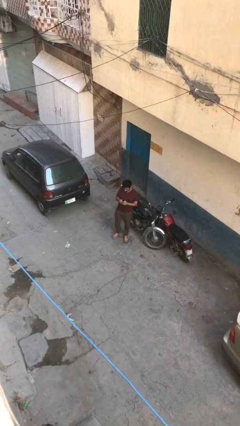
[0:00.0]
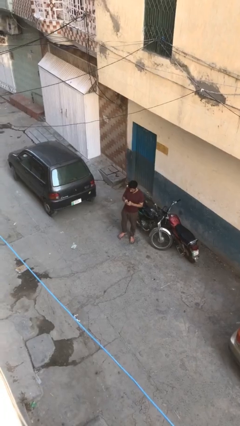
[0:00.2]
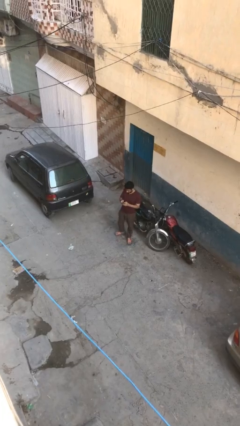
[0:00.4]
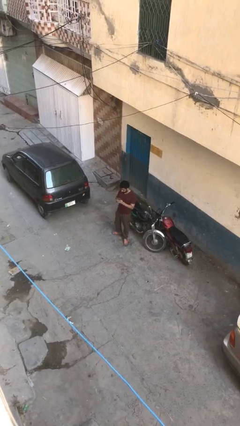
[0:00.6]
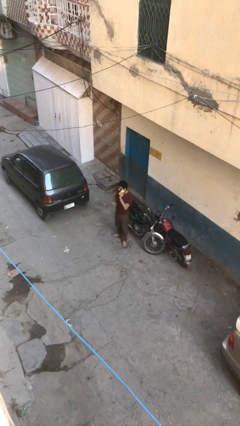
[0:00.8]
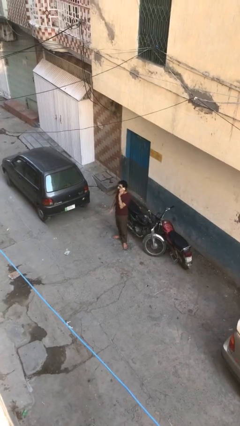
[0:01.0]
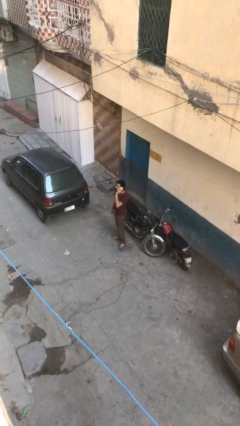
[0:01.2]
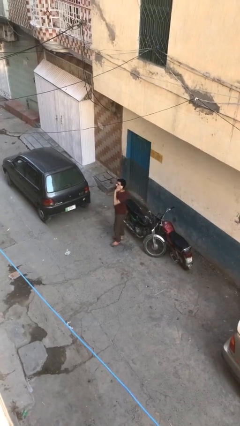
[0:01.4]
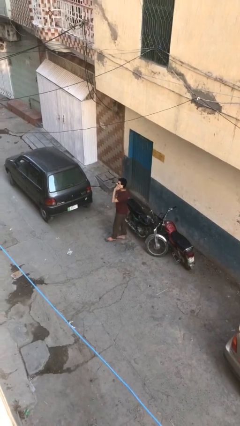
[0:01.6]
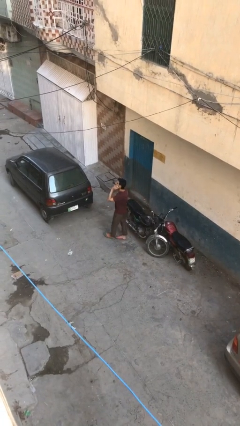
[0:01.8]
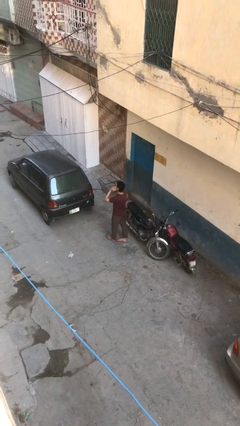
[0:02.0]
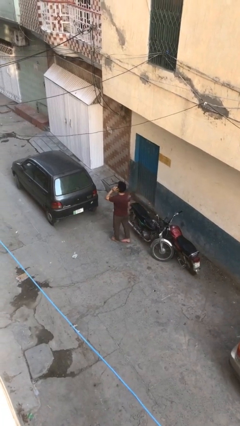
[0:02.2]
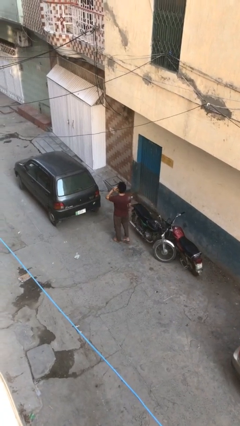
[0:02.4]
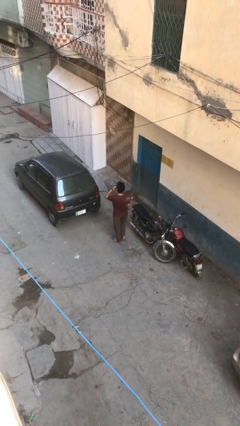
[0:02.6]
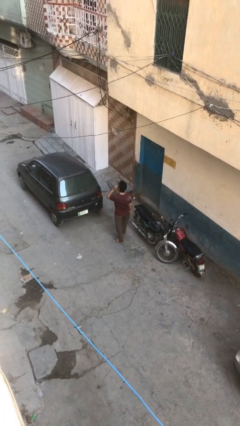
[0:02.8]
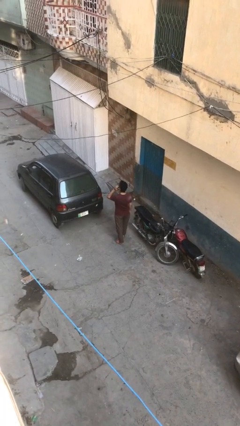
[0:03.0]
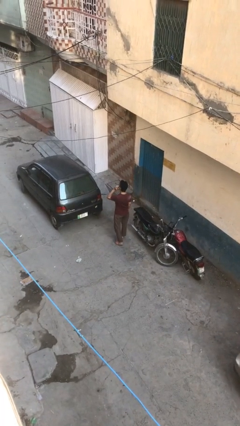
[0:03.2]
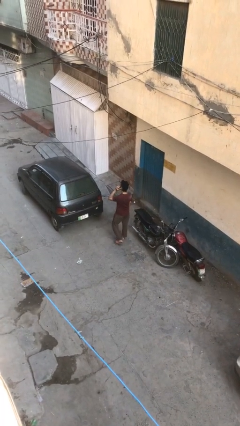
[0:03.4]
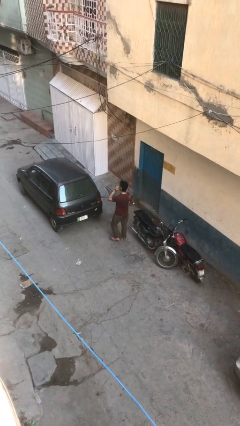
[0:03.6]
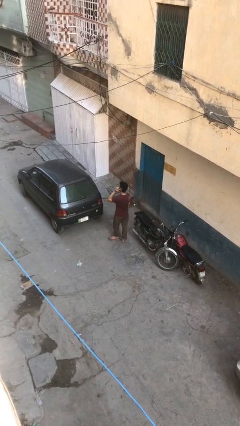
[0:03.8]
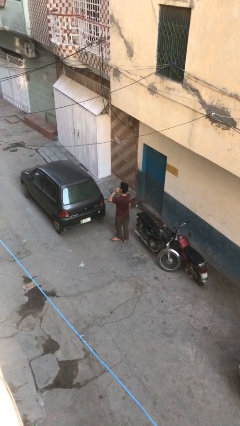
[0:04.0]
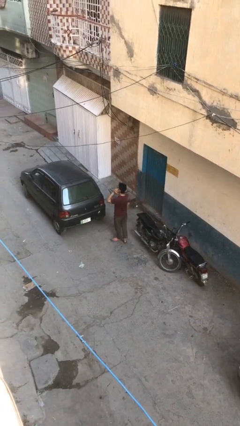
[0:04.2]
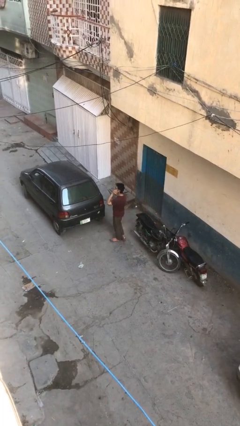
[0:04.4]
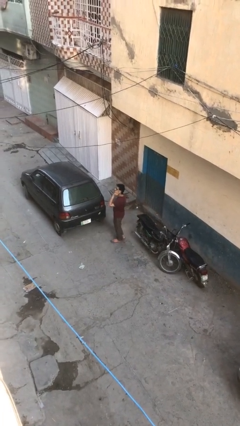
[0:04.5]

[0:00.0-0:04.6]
person talks on phone

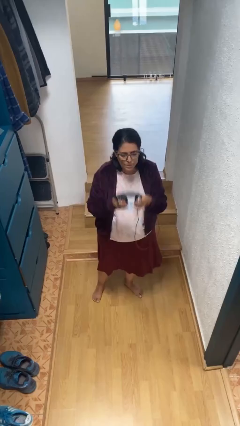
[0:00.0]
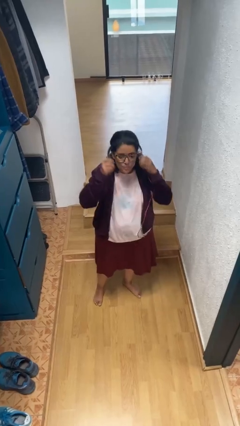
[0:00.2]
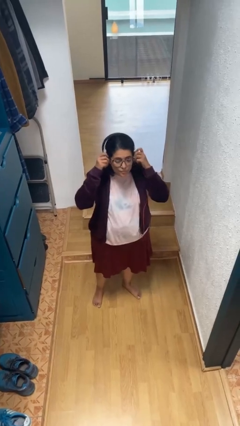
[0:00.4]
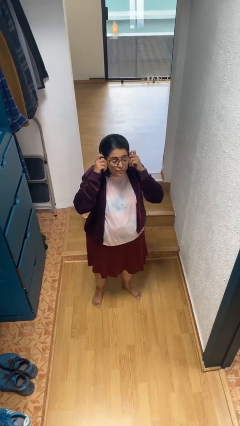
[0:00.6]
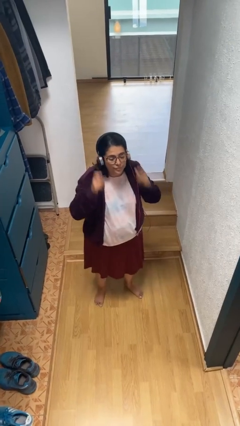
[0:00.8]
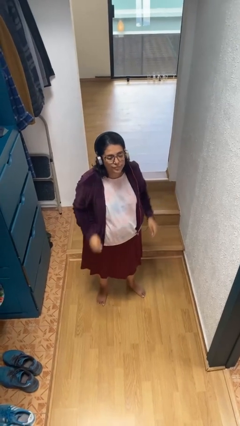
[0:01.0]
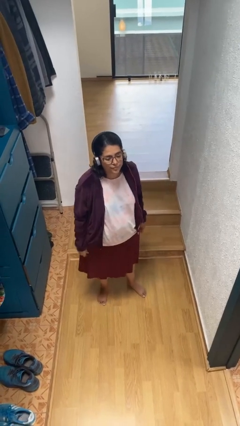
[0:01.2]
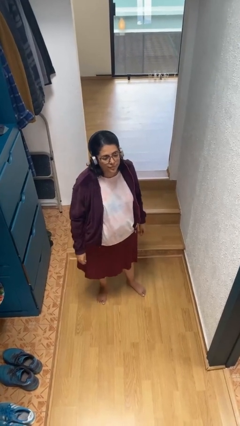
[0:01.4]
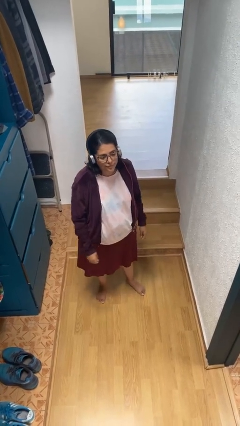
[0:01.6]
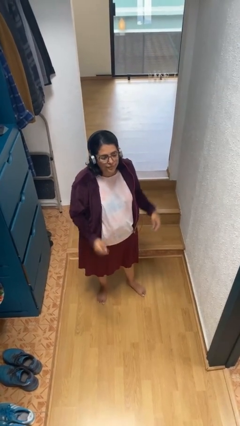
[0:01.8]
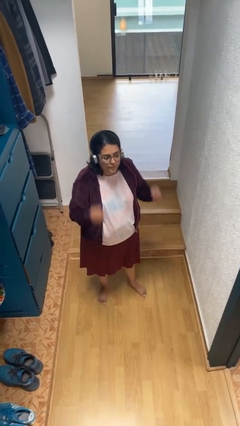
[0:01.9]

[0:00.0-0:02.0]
person puts on headphones

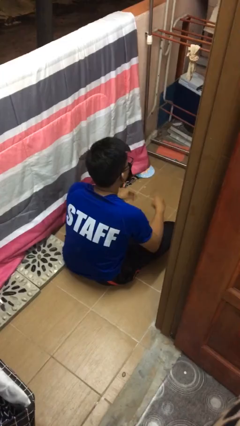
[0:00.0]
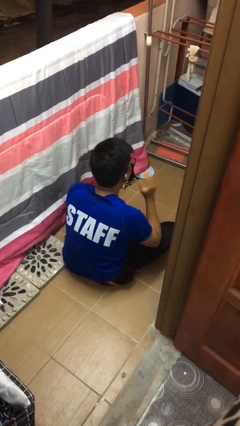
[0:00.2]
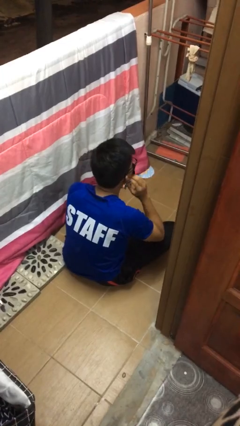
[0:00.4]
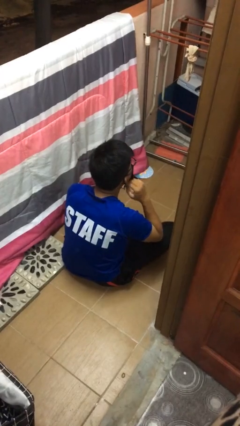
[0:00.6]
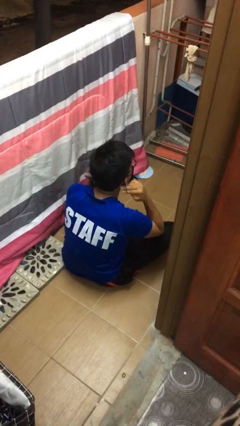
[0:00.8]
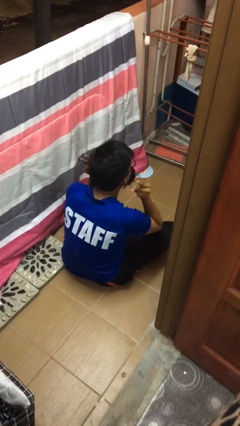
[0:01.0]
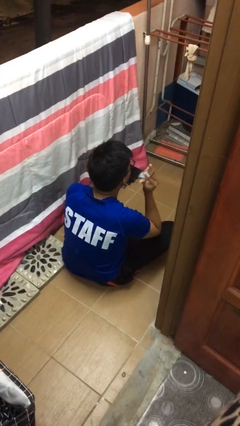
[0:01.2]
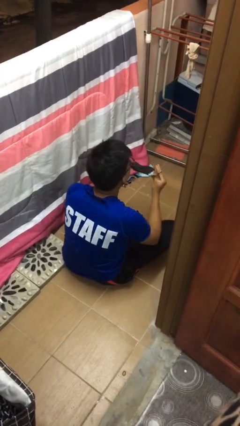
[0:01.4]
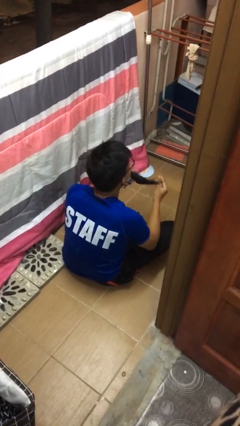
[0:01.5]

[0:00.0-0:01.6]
person takes off facemask

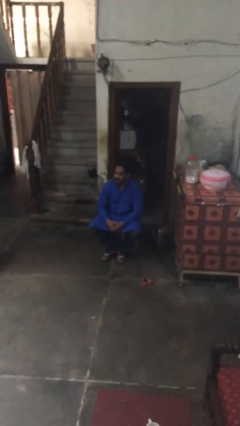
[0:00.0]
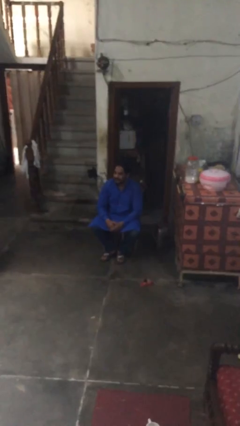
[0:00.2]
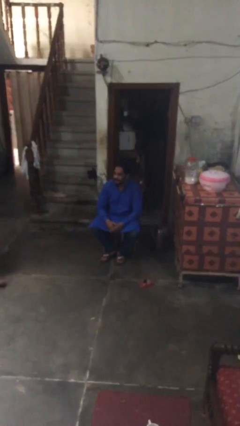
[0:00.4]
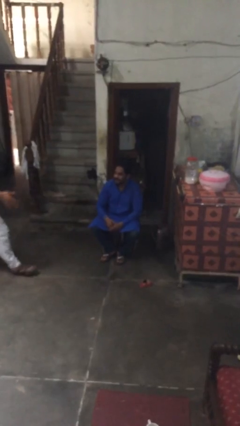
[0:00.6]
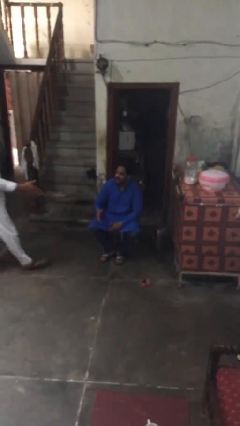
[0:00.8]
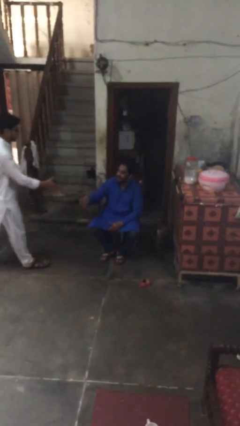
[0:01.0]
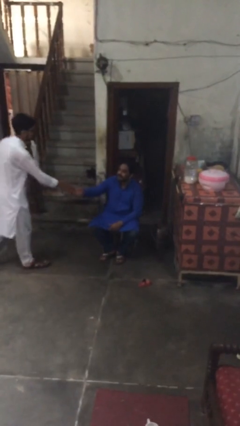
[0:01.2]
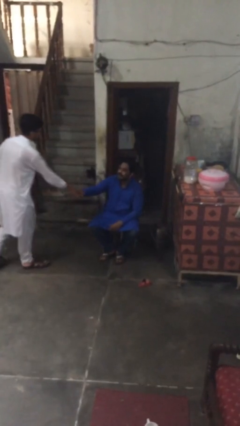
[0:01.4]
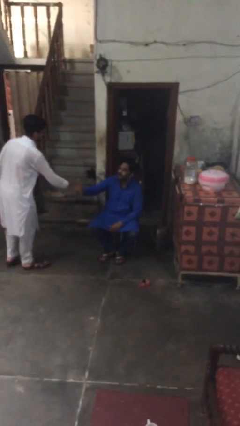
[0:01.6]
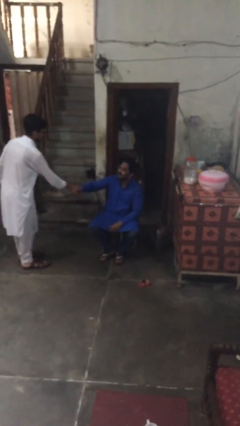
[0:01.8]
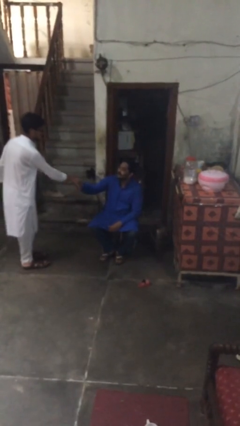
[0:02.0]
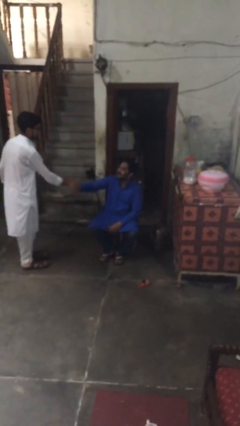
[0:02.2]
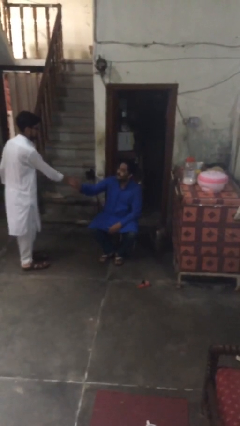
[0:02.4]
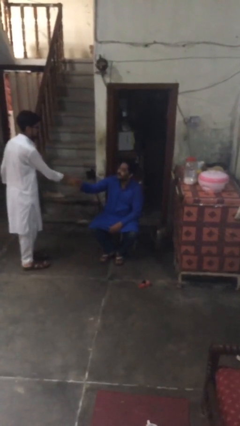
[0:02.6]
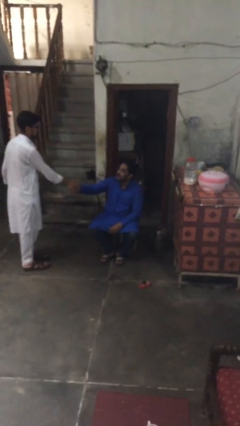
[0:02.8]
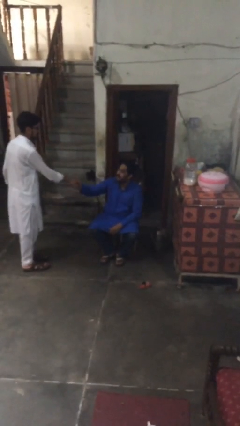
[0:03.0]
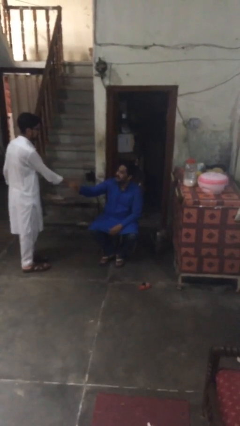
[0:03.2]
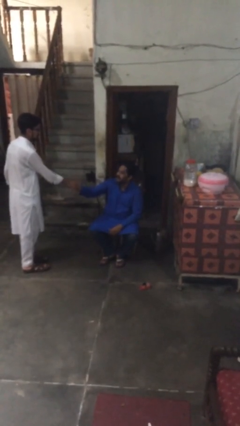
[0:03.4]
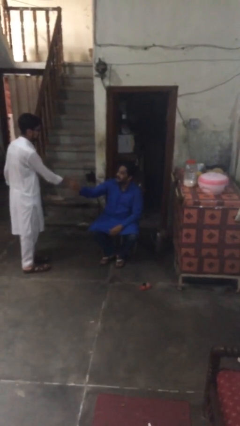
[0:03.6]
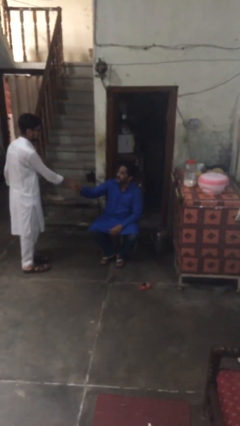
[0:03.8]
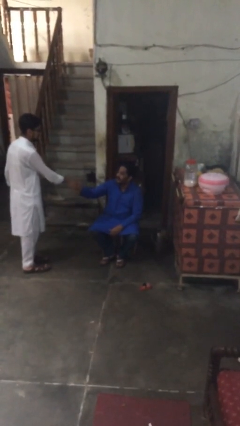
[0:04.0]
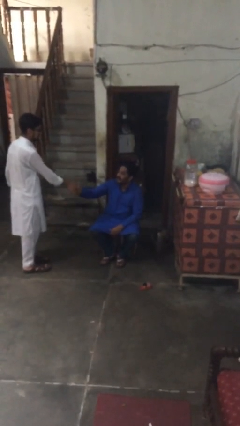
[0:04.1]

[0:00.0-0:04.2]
person shakes hand

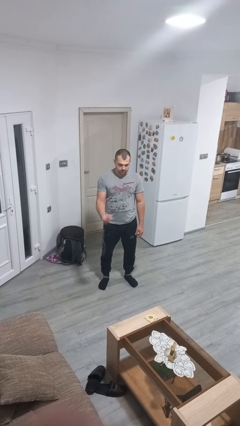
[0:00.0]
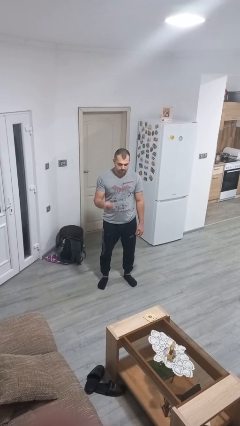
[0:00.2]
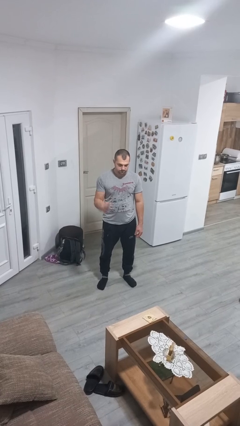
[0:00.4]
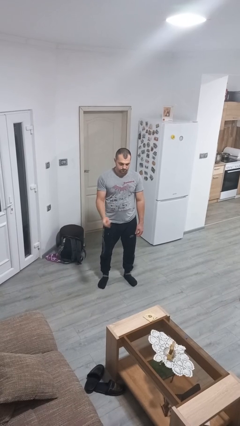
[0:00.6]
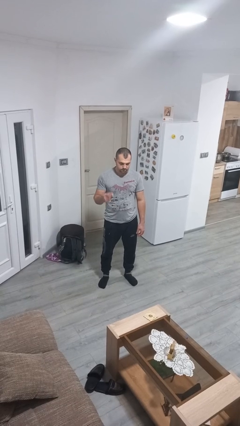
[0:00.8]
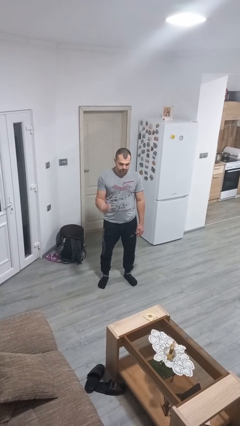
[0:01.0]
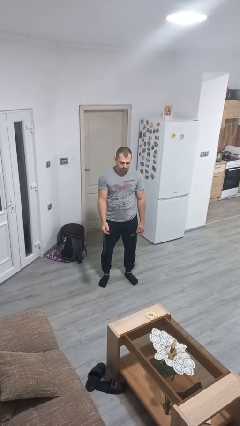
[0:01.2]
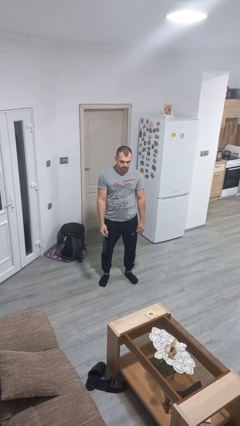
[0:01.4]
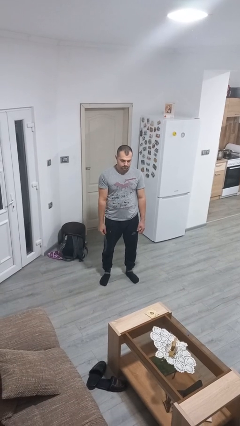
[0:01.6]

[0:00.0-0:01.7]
person snaps fingers

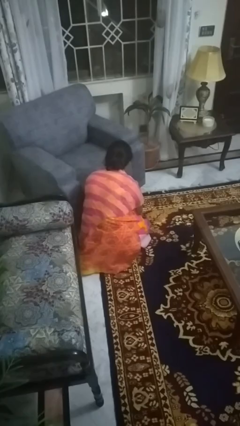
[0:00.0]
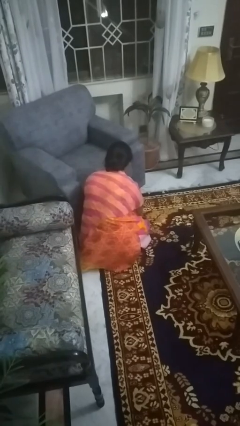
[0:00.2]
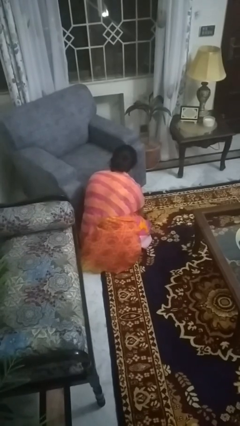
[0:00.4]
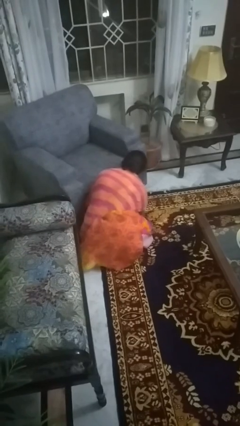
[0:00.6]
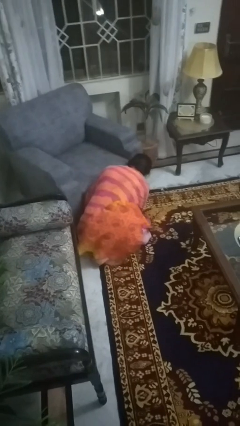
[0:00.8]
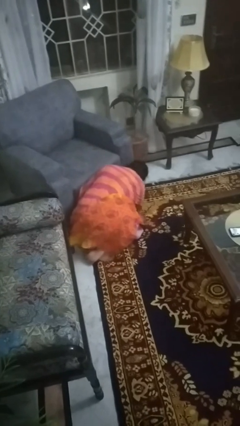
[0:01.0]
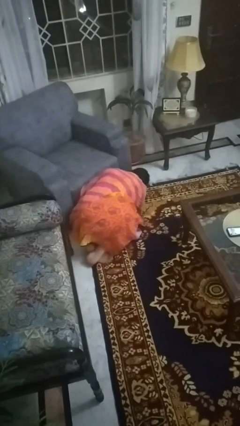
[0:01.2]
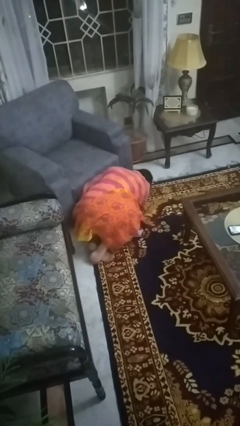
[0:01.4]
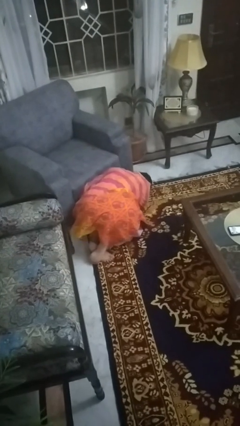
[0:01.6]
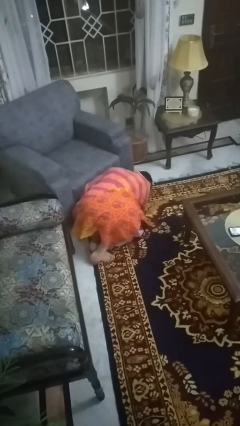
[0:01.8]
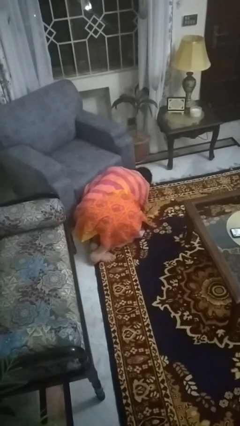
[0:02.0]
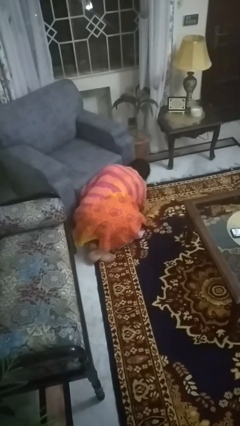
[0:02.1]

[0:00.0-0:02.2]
person searches under couch

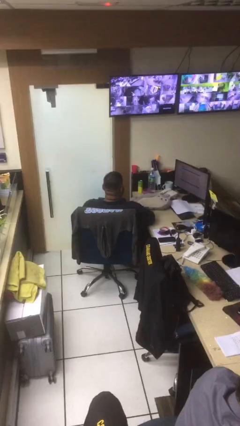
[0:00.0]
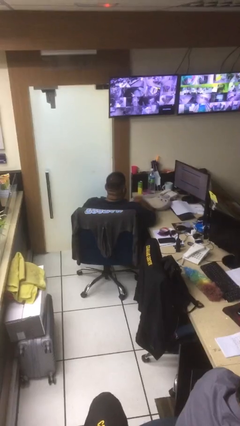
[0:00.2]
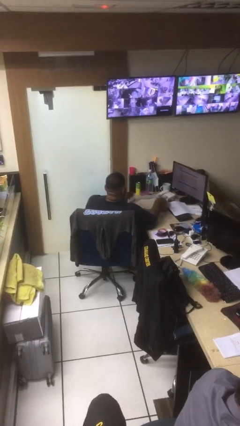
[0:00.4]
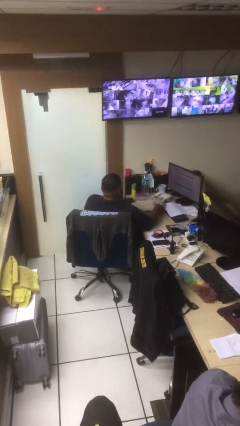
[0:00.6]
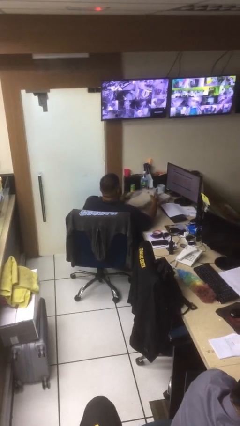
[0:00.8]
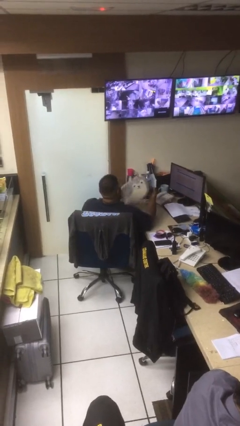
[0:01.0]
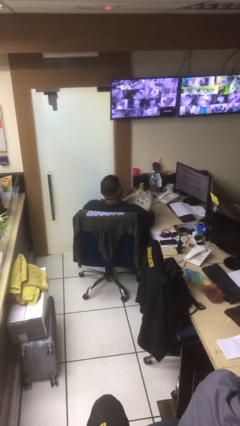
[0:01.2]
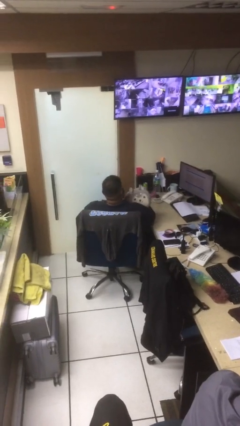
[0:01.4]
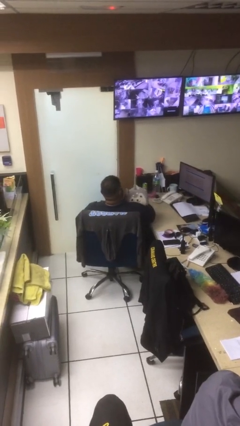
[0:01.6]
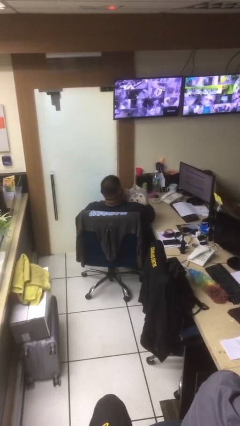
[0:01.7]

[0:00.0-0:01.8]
person hugs stuffed animal
